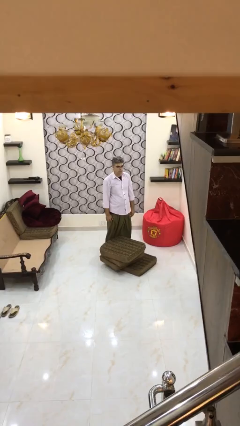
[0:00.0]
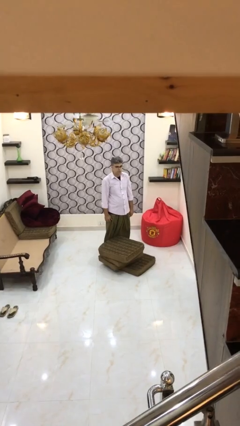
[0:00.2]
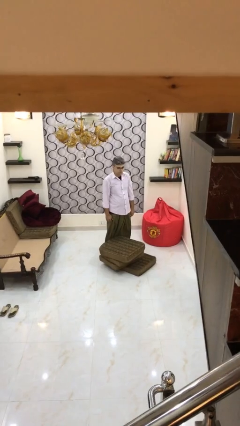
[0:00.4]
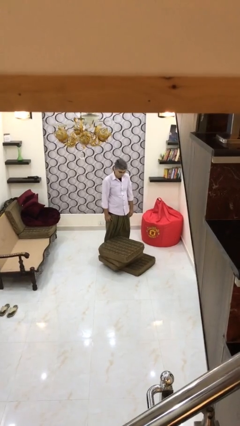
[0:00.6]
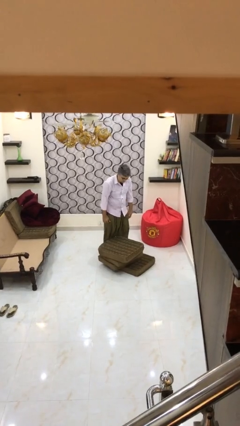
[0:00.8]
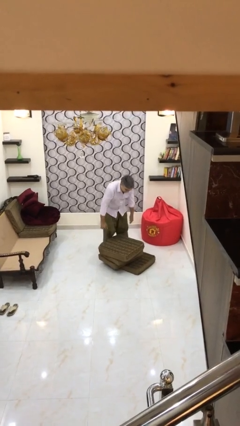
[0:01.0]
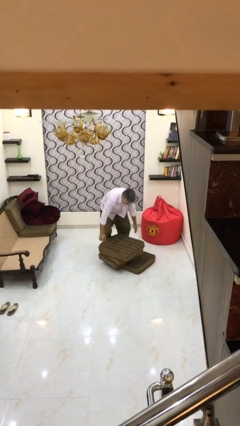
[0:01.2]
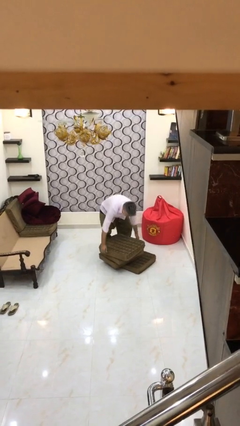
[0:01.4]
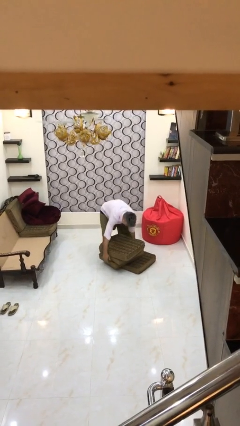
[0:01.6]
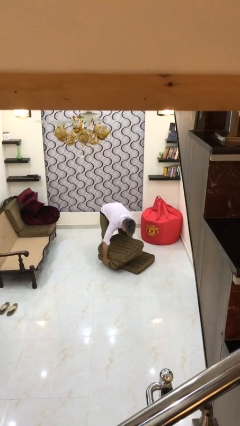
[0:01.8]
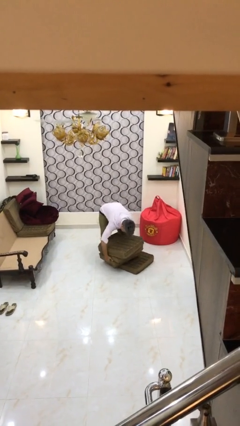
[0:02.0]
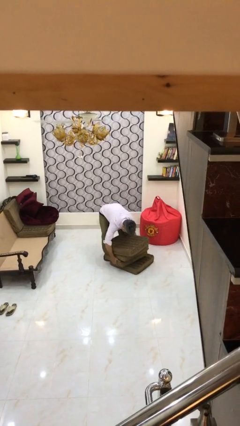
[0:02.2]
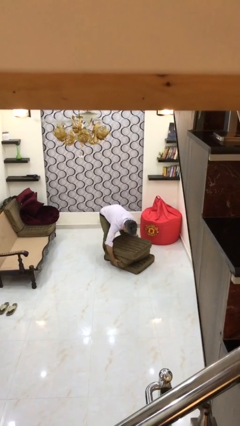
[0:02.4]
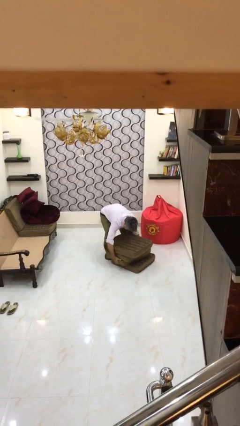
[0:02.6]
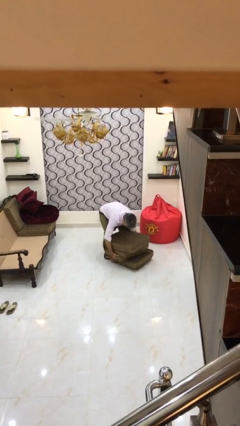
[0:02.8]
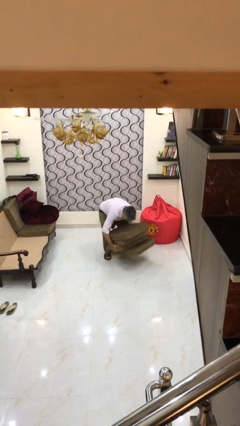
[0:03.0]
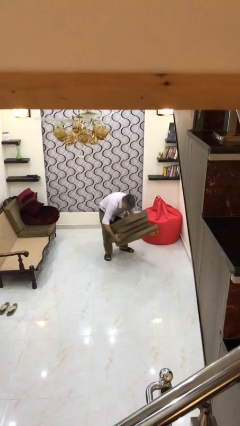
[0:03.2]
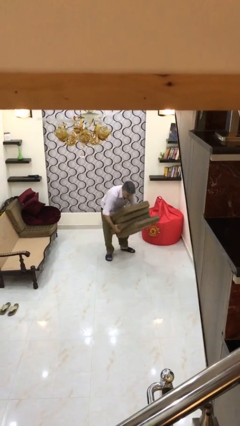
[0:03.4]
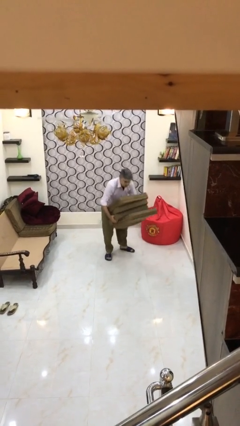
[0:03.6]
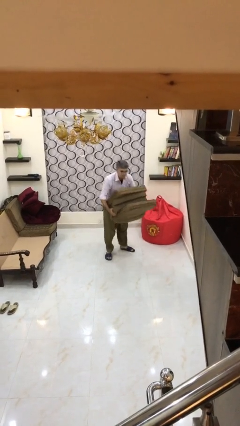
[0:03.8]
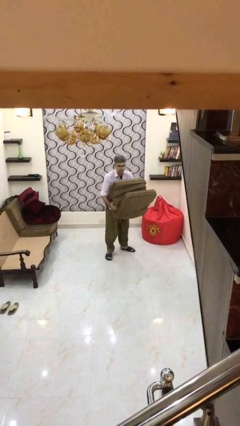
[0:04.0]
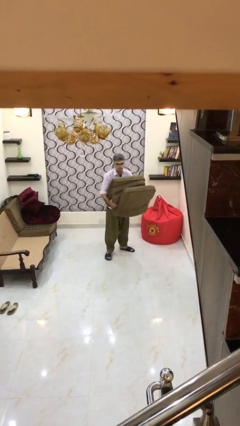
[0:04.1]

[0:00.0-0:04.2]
person picks up object from floor

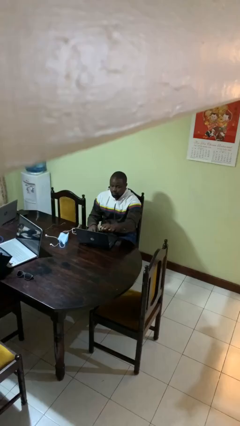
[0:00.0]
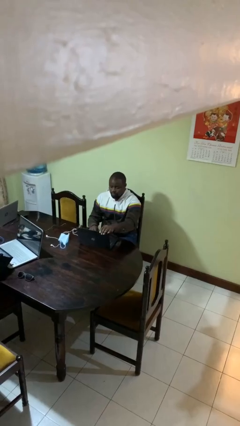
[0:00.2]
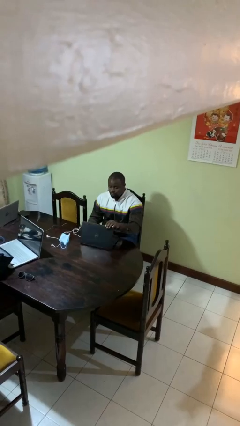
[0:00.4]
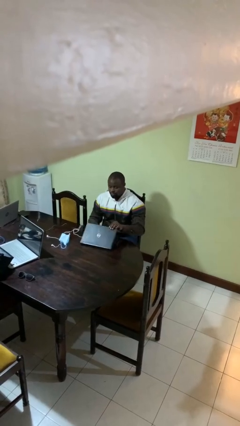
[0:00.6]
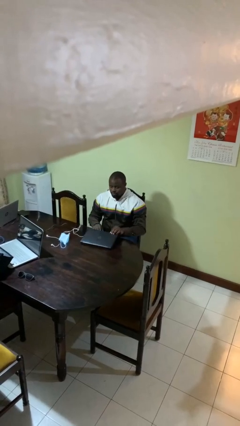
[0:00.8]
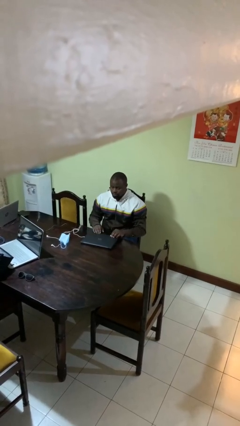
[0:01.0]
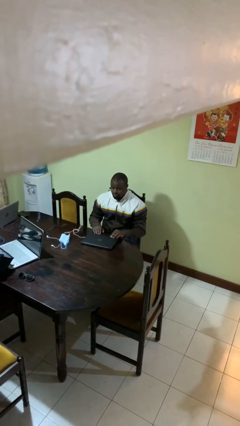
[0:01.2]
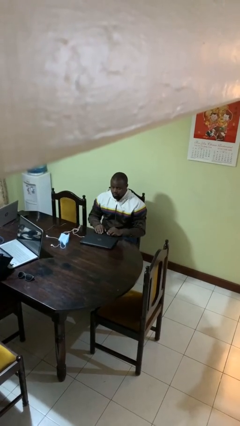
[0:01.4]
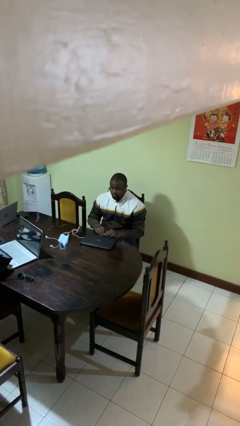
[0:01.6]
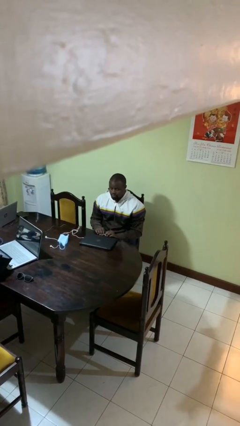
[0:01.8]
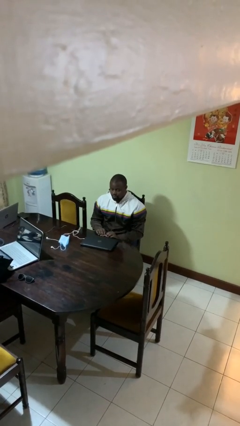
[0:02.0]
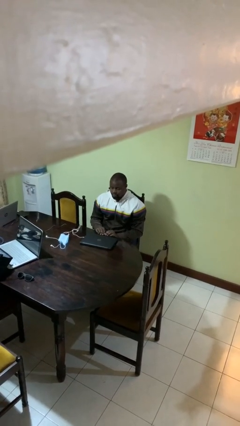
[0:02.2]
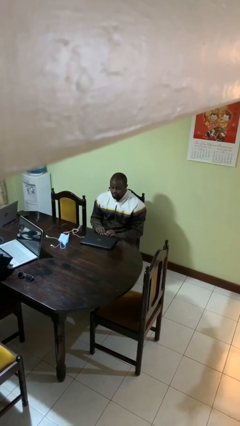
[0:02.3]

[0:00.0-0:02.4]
person closes laptop

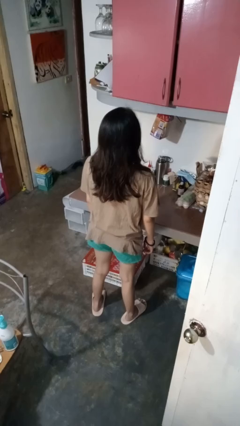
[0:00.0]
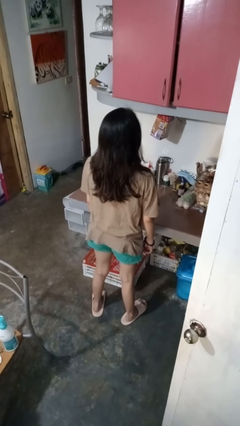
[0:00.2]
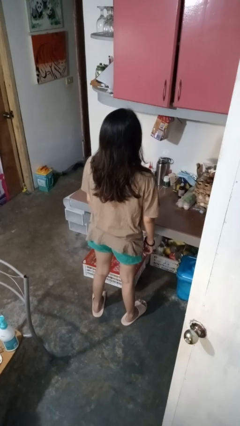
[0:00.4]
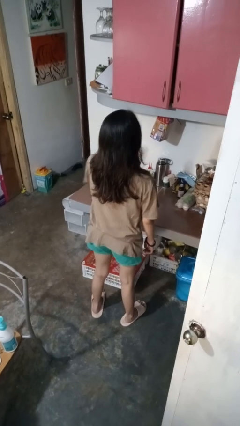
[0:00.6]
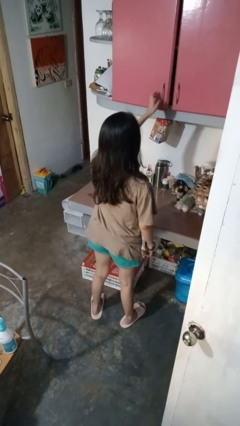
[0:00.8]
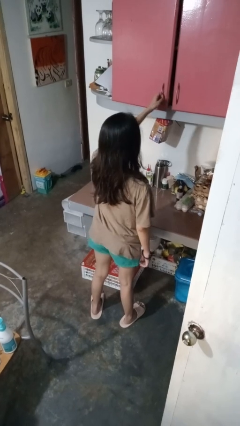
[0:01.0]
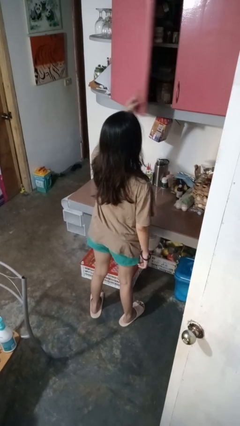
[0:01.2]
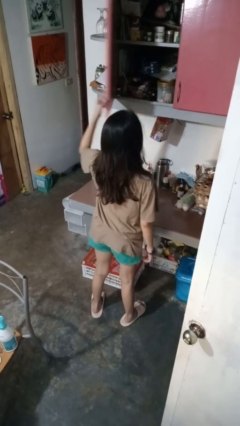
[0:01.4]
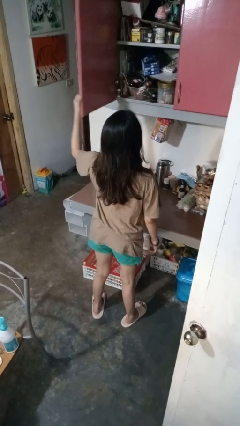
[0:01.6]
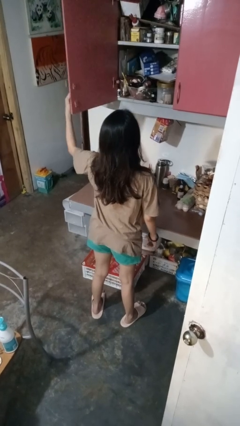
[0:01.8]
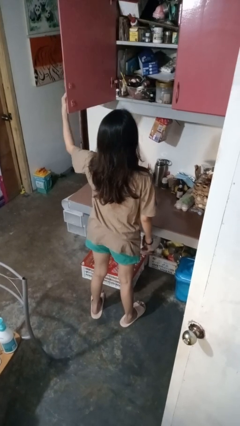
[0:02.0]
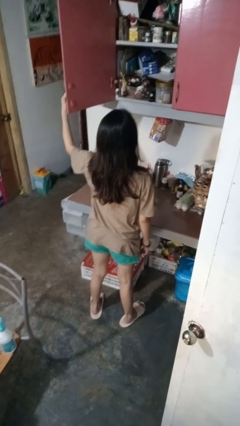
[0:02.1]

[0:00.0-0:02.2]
person opens cabinet

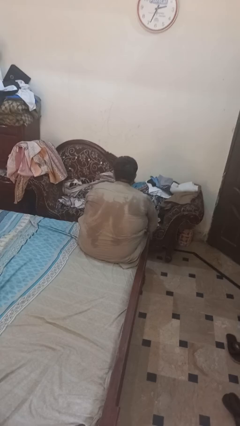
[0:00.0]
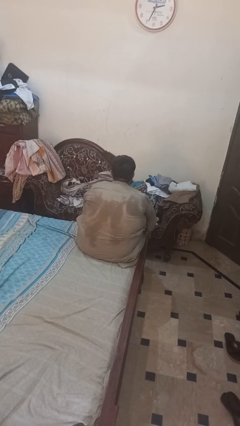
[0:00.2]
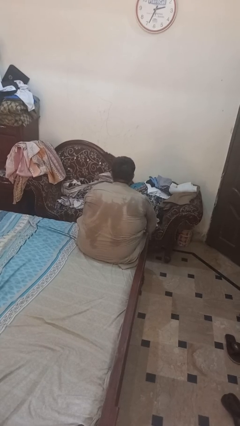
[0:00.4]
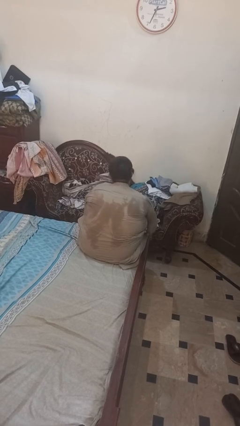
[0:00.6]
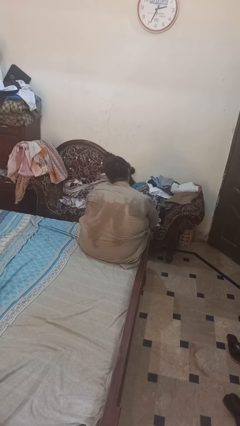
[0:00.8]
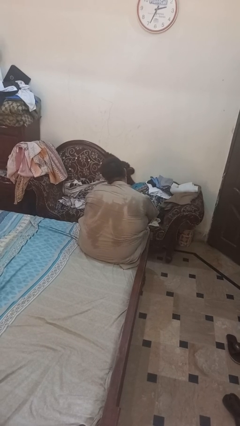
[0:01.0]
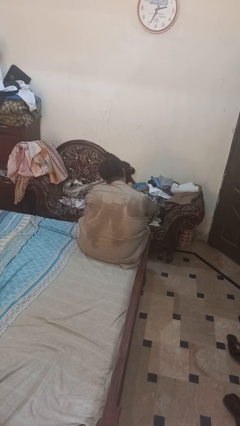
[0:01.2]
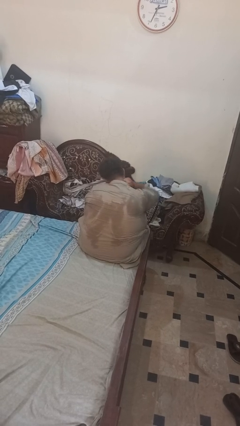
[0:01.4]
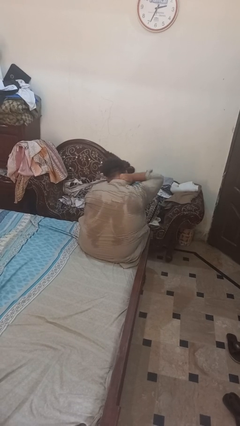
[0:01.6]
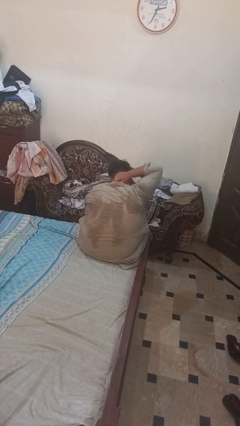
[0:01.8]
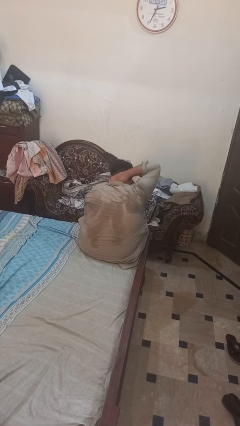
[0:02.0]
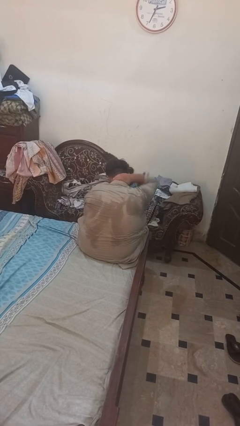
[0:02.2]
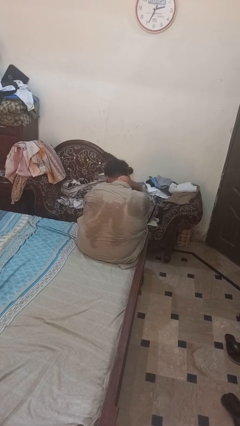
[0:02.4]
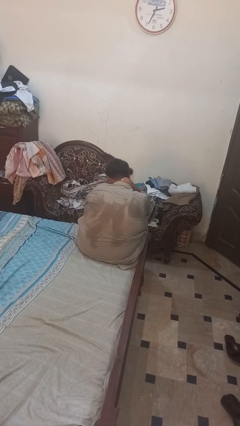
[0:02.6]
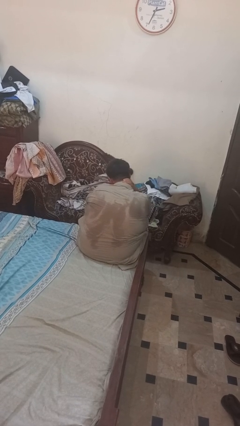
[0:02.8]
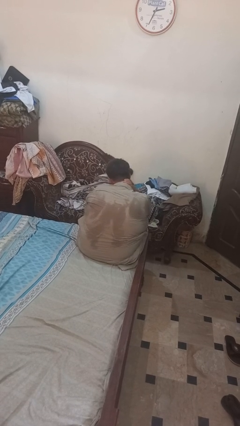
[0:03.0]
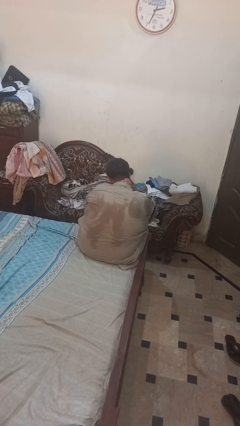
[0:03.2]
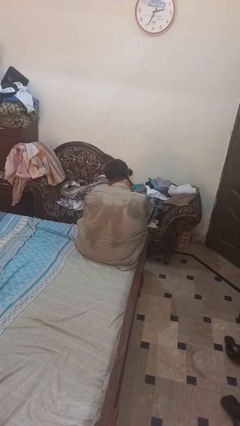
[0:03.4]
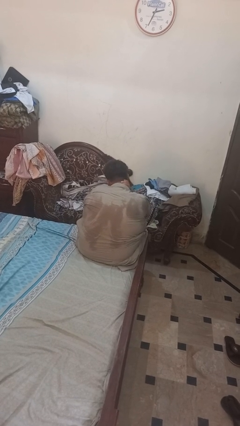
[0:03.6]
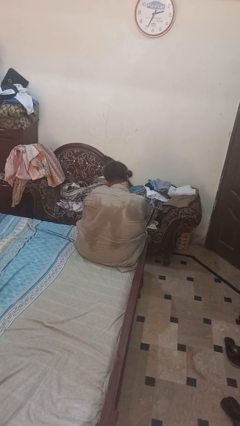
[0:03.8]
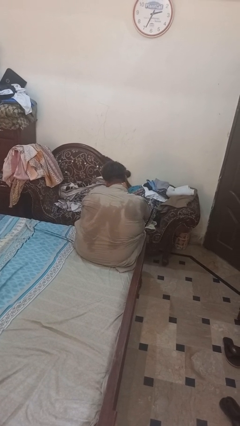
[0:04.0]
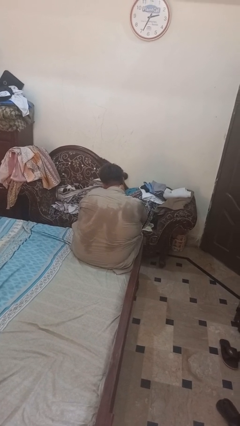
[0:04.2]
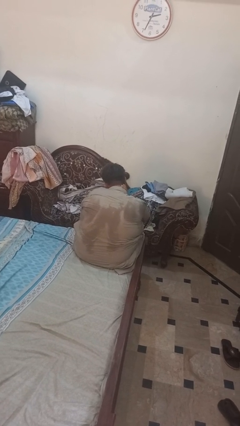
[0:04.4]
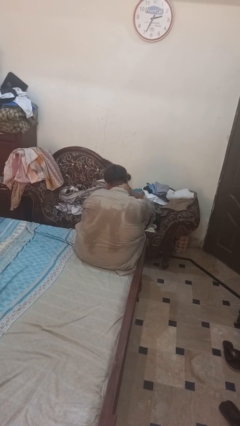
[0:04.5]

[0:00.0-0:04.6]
person rubs neck

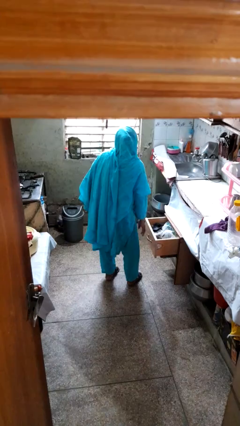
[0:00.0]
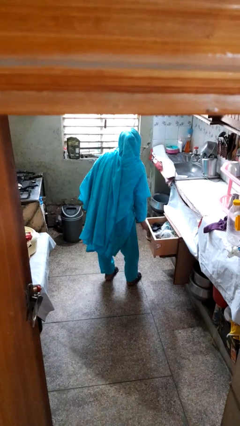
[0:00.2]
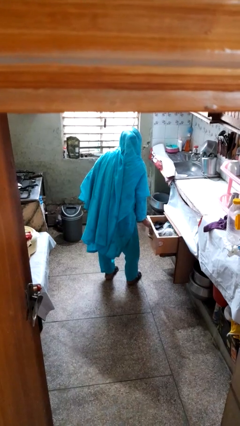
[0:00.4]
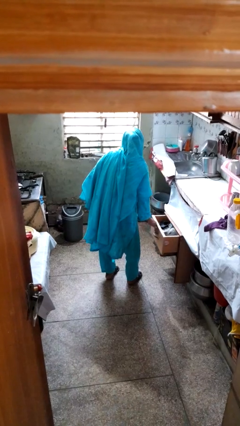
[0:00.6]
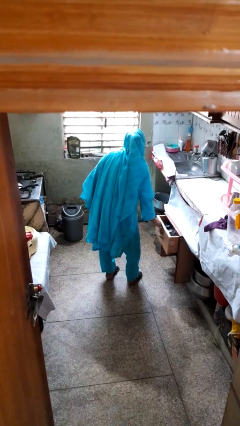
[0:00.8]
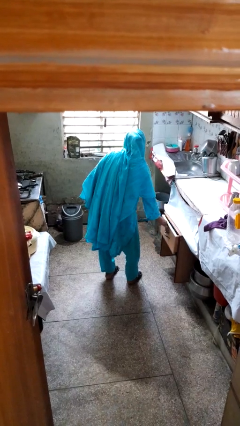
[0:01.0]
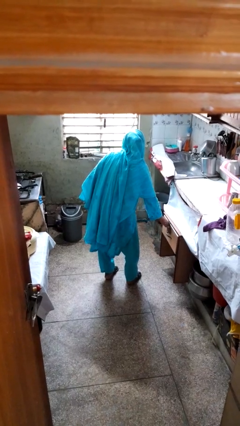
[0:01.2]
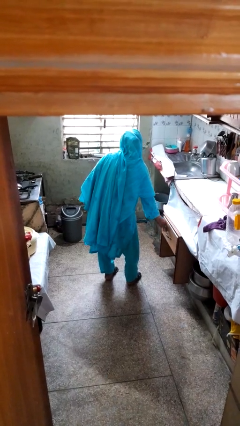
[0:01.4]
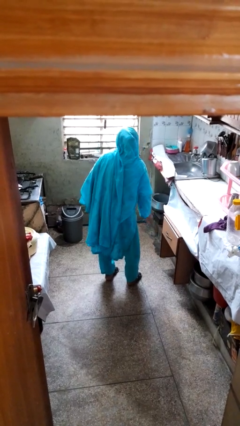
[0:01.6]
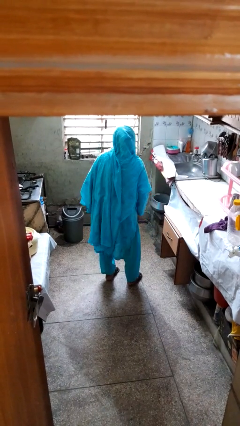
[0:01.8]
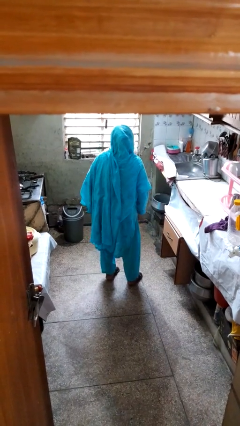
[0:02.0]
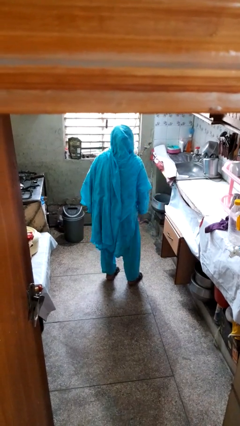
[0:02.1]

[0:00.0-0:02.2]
person closes kitchen drawer

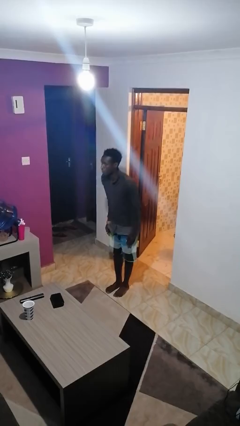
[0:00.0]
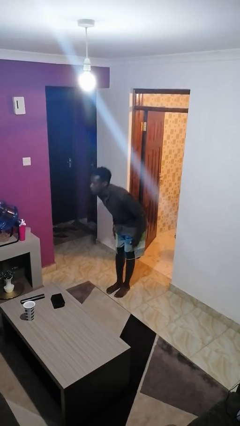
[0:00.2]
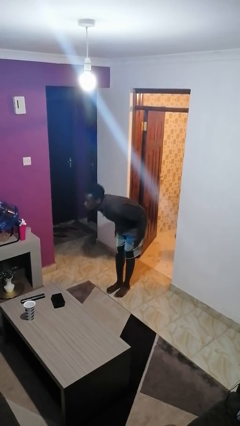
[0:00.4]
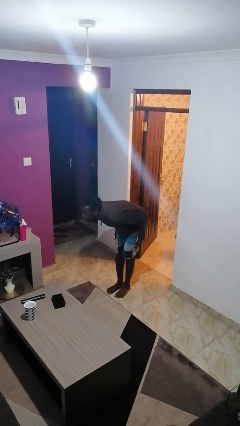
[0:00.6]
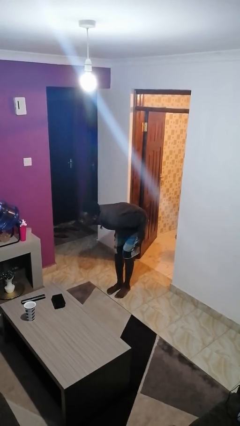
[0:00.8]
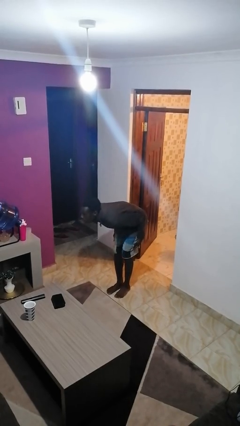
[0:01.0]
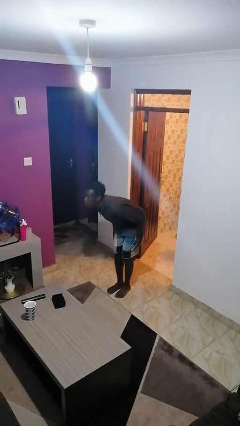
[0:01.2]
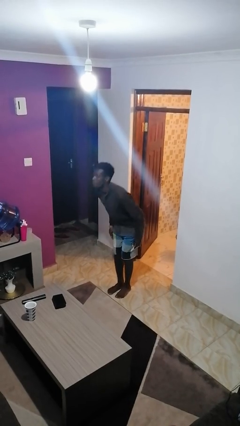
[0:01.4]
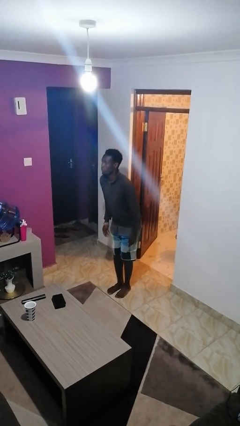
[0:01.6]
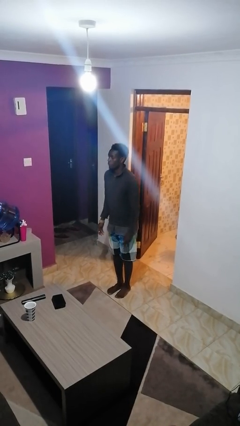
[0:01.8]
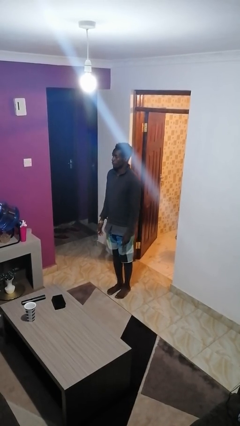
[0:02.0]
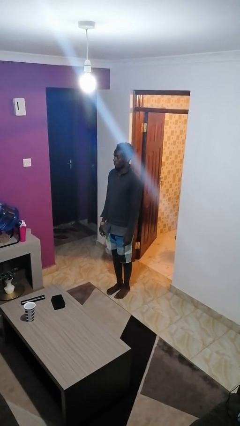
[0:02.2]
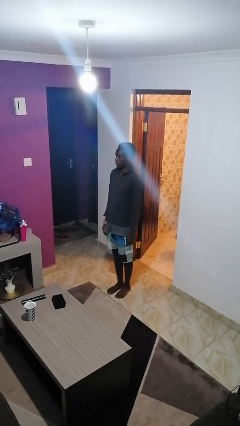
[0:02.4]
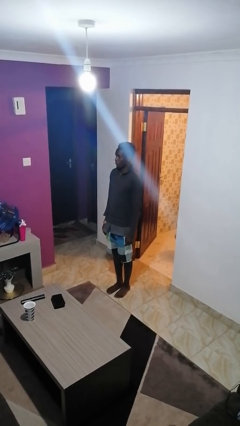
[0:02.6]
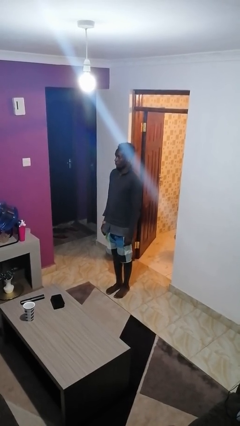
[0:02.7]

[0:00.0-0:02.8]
person bows
